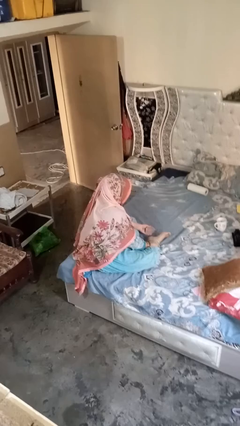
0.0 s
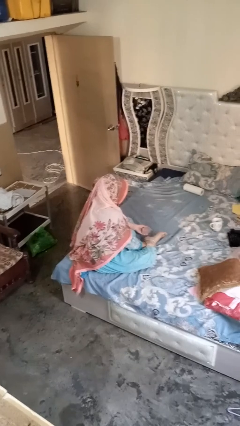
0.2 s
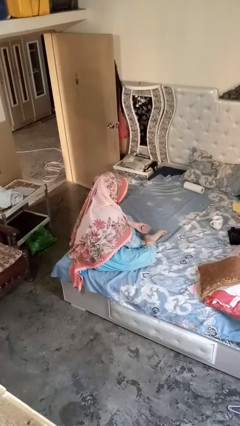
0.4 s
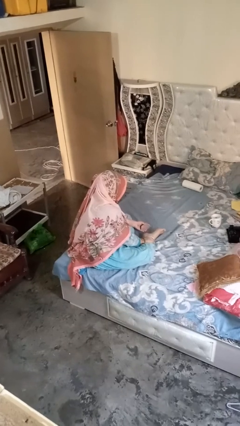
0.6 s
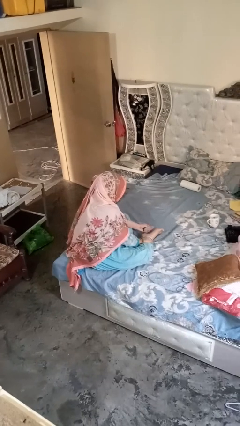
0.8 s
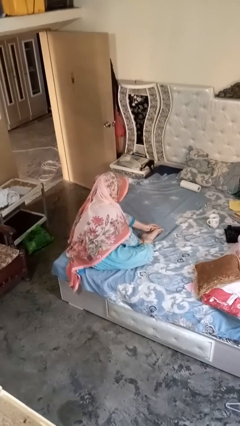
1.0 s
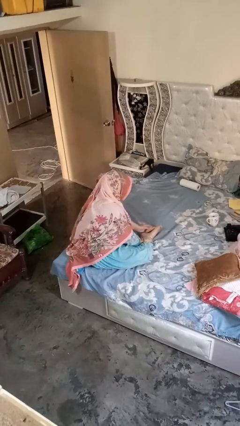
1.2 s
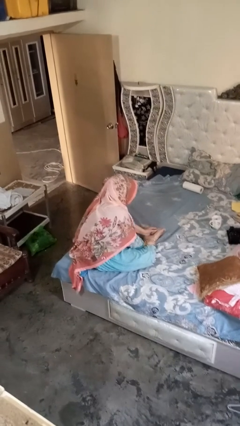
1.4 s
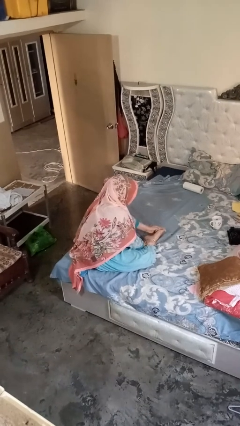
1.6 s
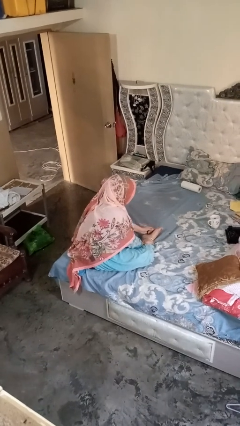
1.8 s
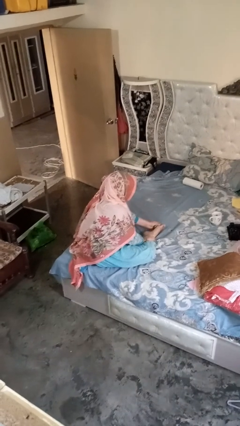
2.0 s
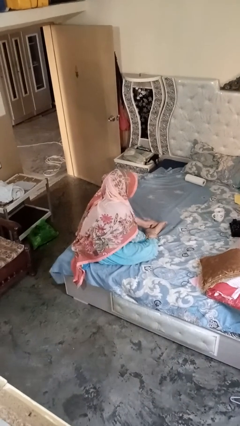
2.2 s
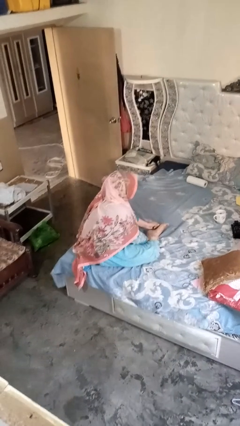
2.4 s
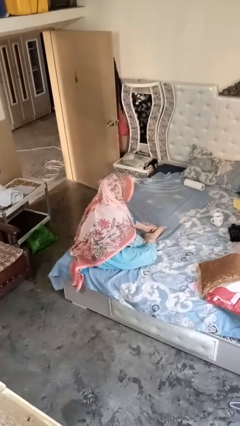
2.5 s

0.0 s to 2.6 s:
person rubs foot

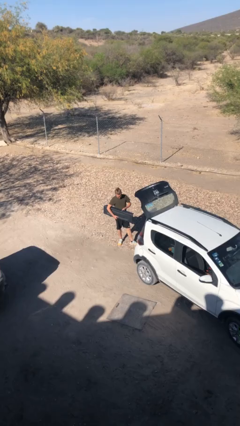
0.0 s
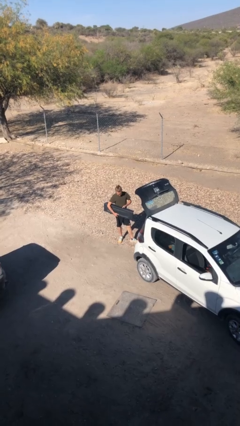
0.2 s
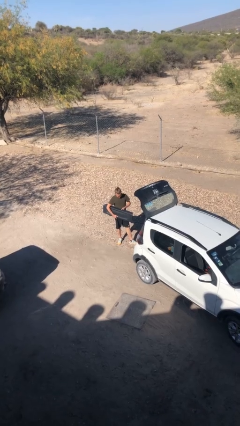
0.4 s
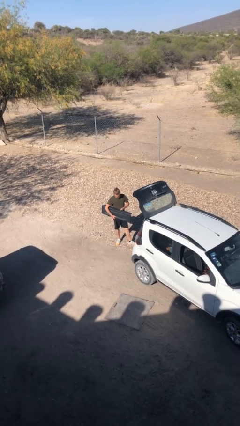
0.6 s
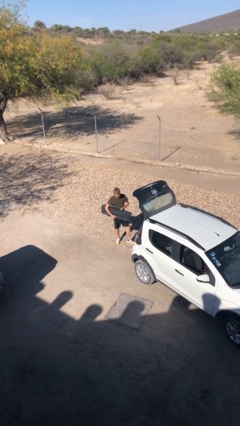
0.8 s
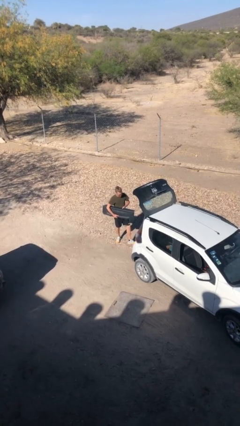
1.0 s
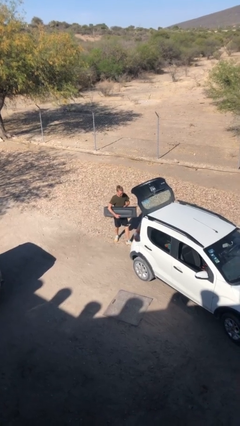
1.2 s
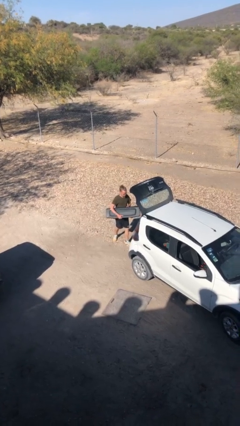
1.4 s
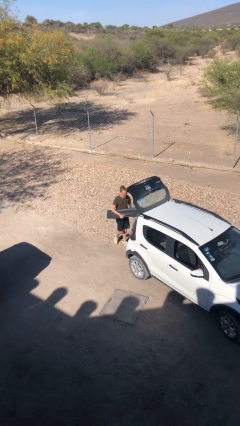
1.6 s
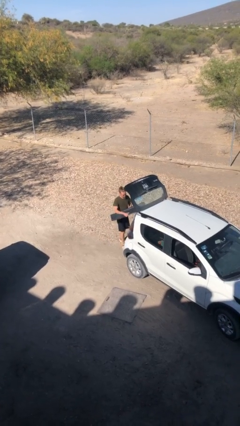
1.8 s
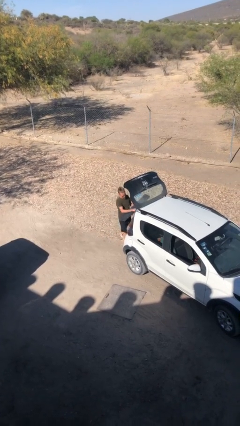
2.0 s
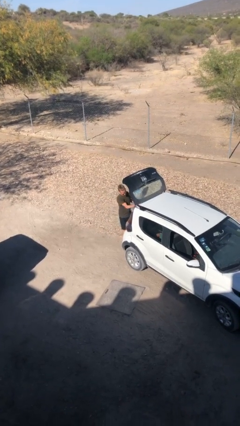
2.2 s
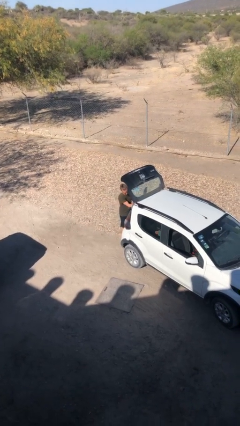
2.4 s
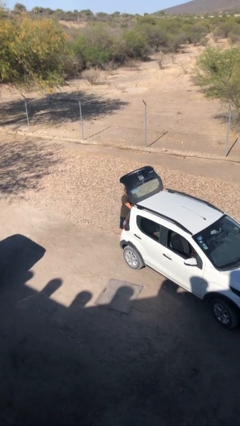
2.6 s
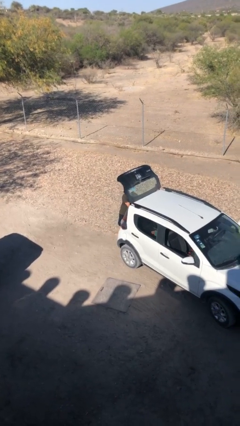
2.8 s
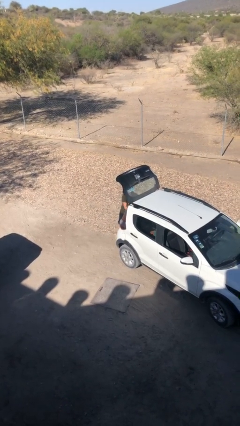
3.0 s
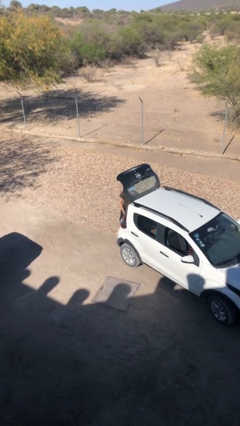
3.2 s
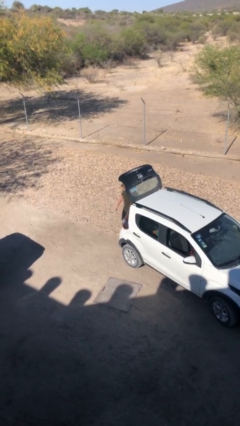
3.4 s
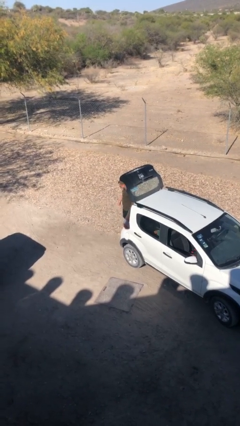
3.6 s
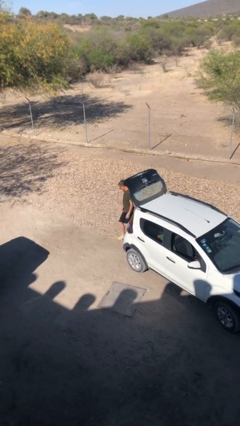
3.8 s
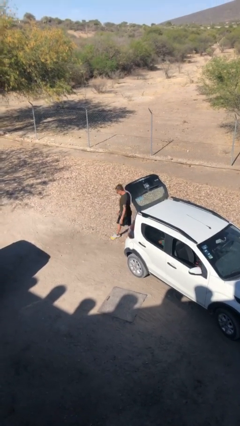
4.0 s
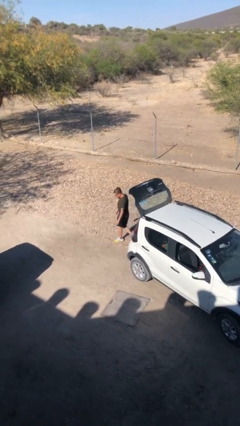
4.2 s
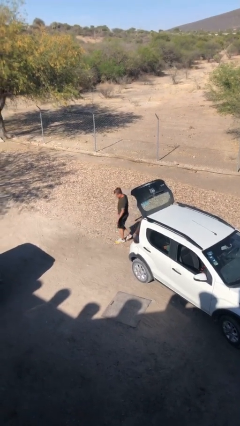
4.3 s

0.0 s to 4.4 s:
person loads car

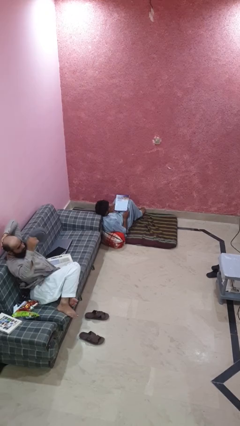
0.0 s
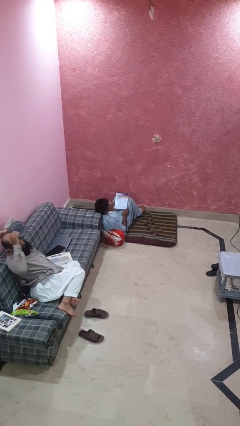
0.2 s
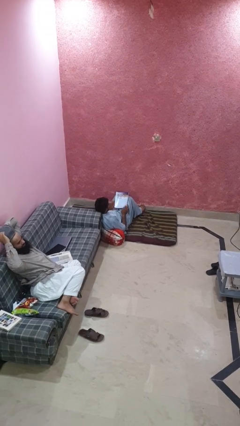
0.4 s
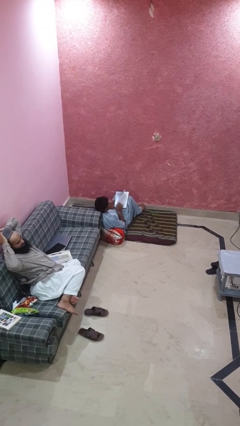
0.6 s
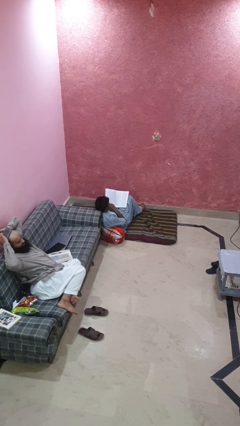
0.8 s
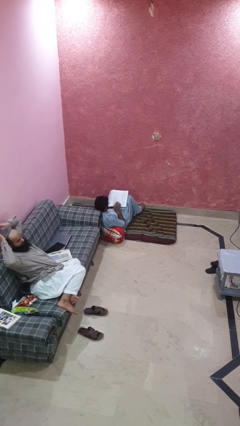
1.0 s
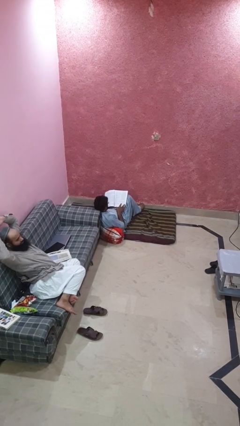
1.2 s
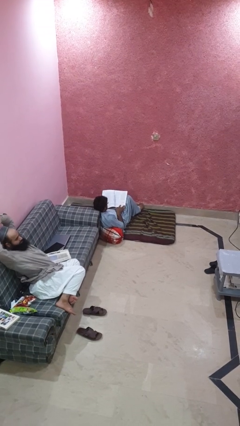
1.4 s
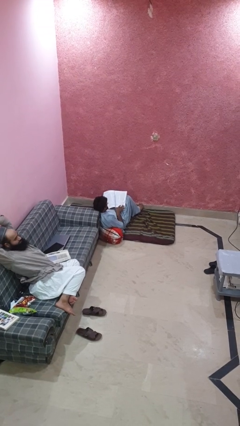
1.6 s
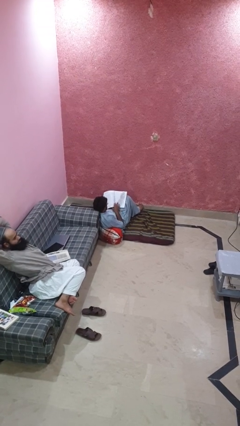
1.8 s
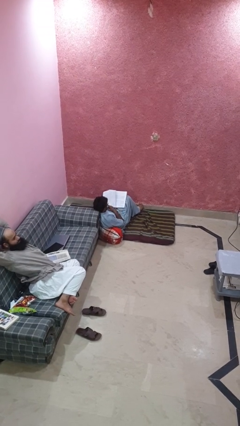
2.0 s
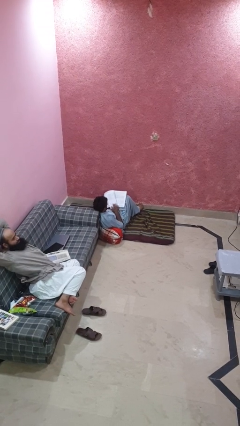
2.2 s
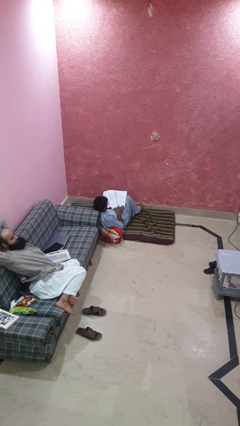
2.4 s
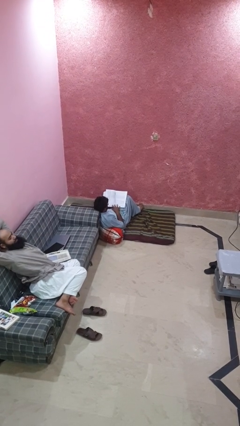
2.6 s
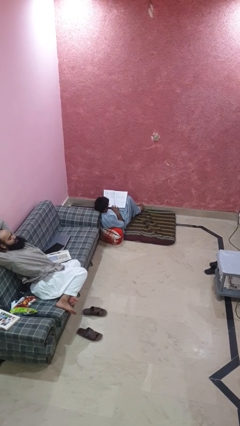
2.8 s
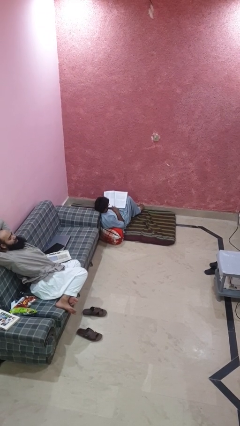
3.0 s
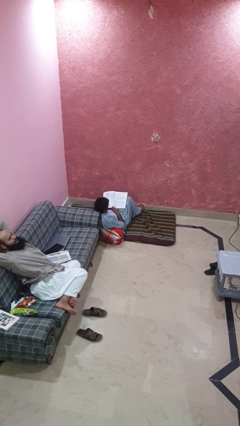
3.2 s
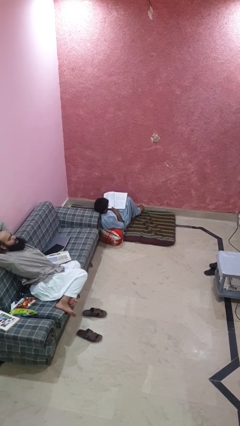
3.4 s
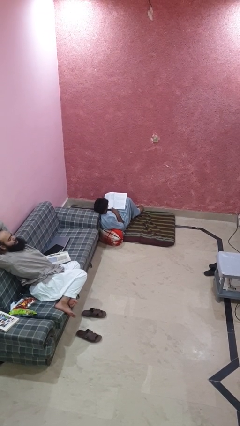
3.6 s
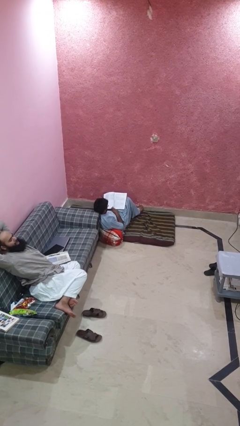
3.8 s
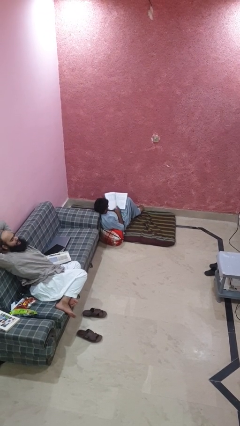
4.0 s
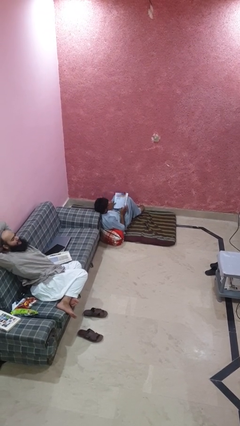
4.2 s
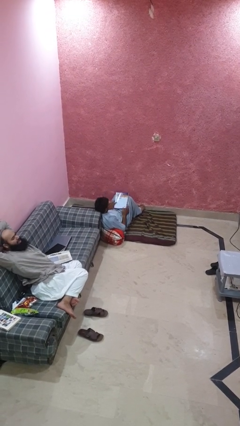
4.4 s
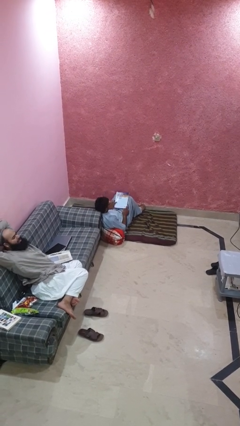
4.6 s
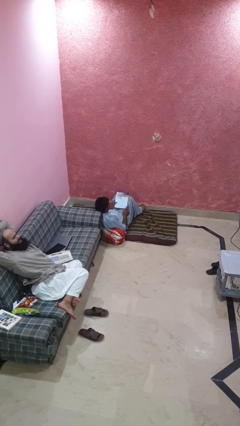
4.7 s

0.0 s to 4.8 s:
person reads magazine

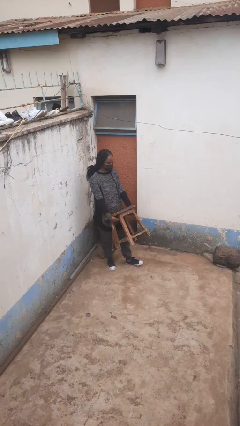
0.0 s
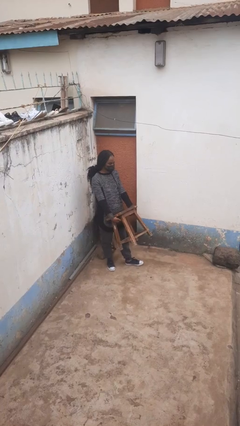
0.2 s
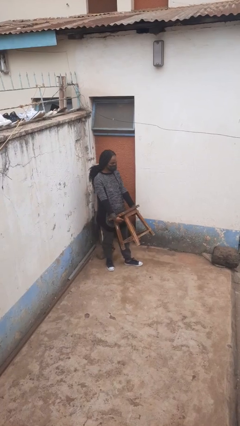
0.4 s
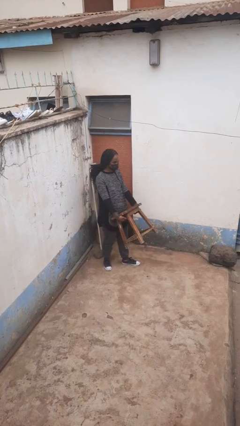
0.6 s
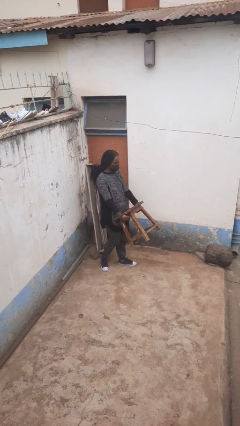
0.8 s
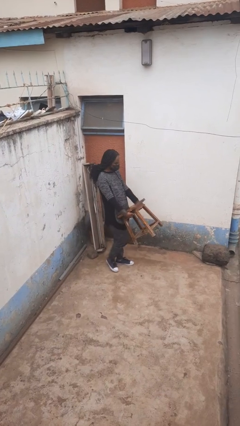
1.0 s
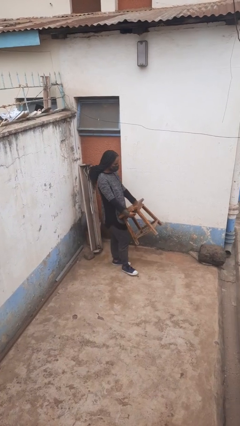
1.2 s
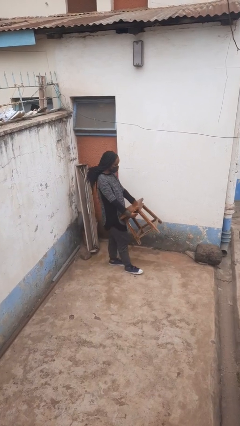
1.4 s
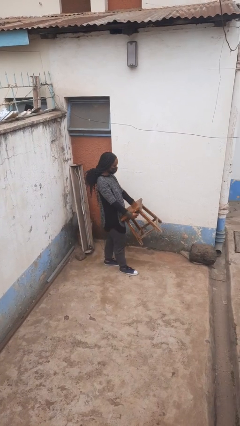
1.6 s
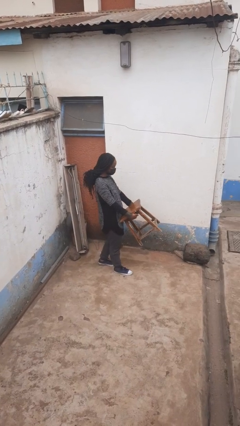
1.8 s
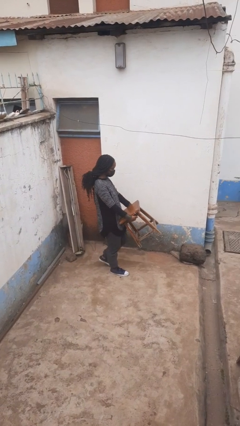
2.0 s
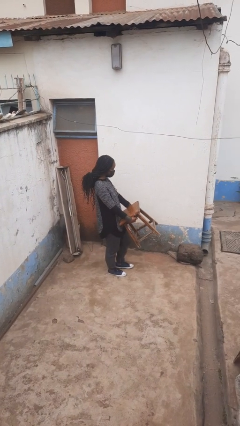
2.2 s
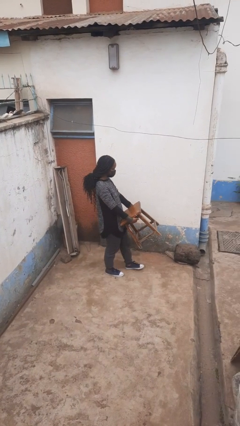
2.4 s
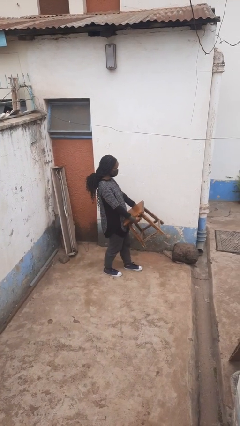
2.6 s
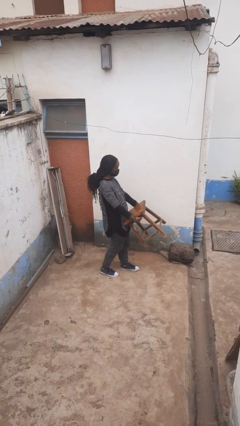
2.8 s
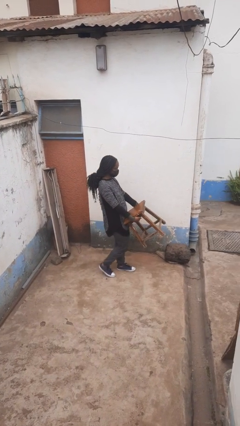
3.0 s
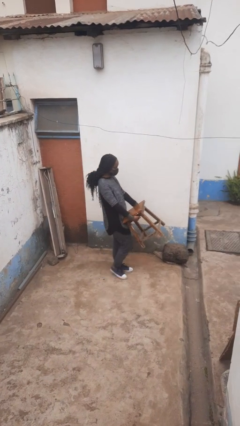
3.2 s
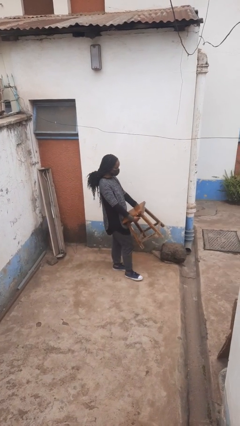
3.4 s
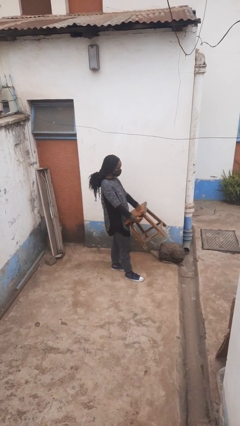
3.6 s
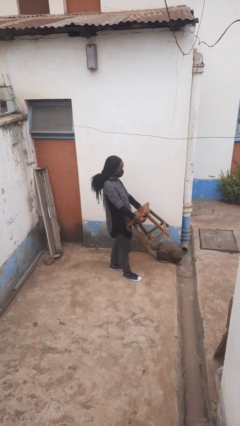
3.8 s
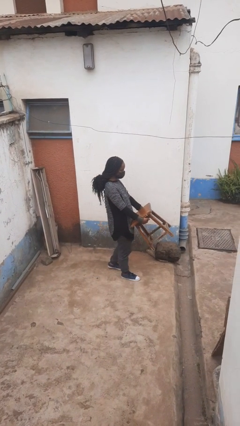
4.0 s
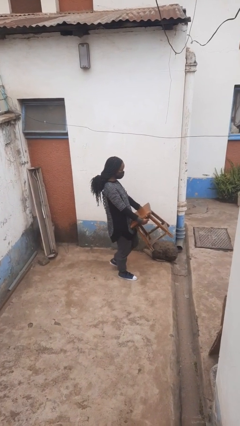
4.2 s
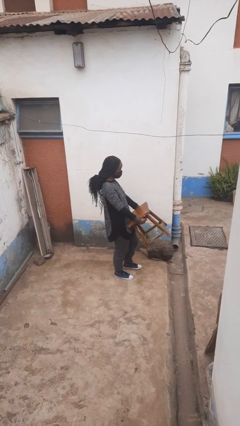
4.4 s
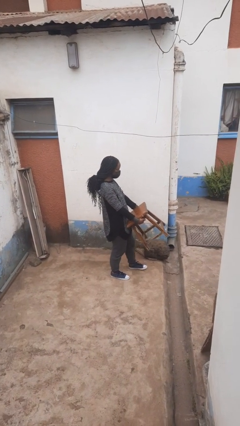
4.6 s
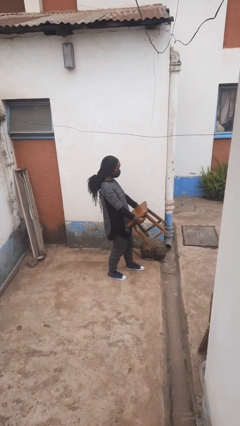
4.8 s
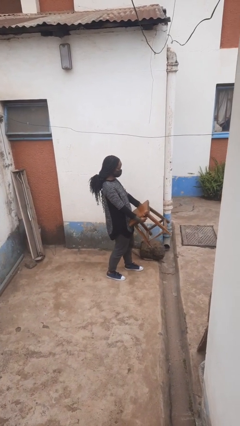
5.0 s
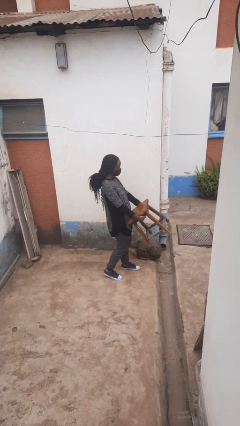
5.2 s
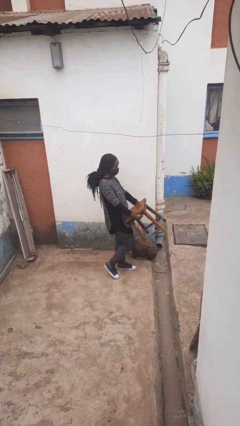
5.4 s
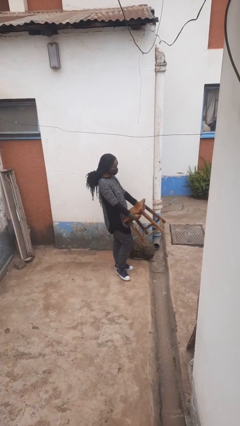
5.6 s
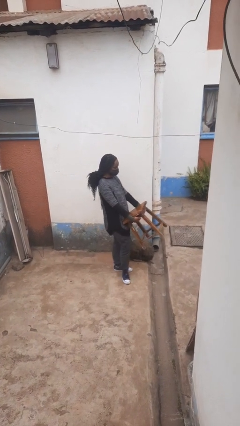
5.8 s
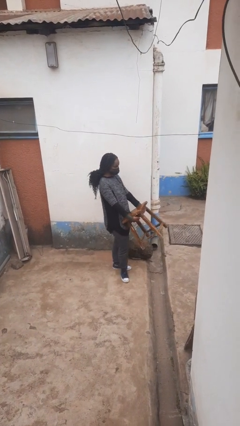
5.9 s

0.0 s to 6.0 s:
person carries furniture

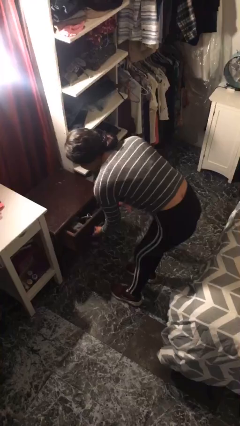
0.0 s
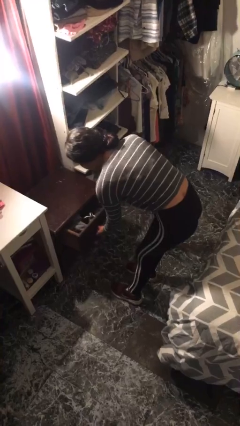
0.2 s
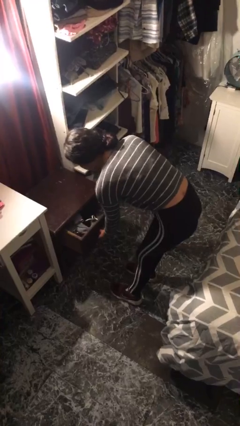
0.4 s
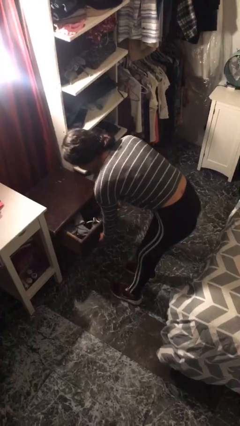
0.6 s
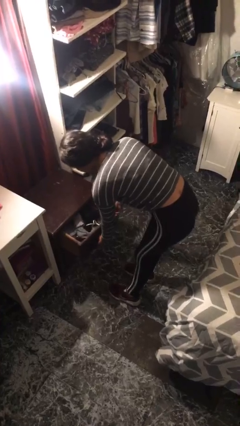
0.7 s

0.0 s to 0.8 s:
person opens dresser drawer
